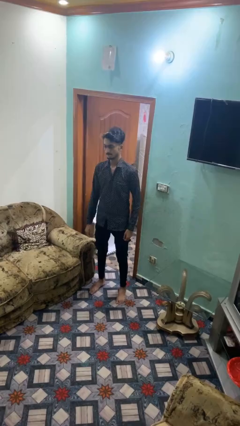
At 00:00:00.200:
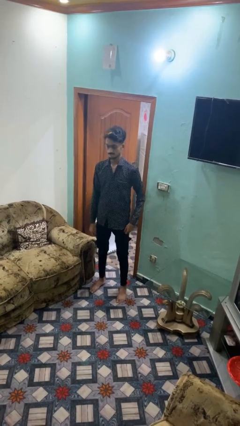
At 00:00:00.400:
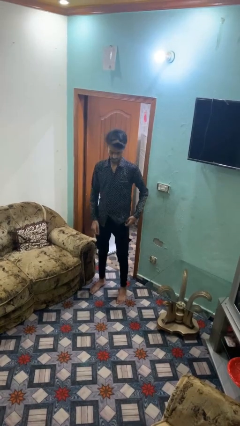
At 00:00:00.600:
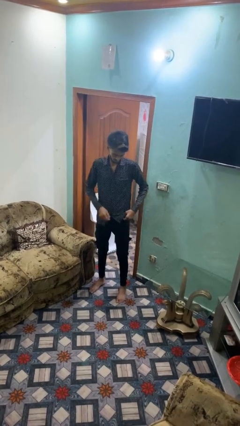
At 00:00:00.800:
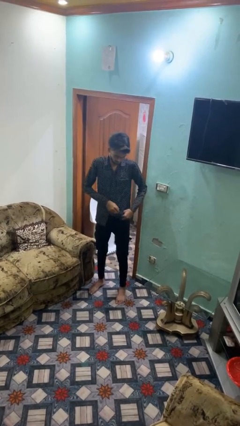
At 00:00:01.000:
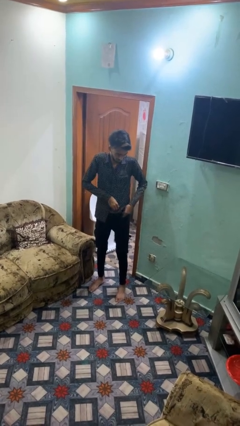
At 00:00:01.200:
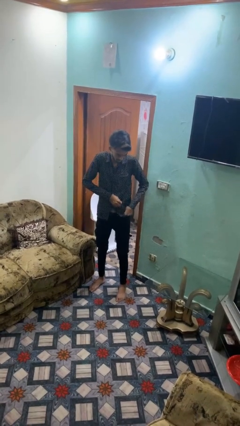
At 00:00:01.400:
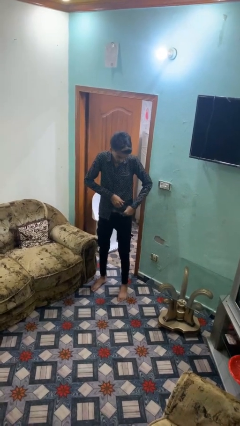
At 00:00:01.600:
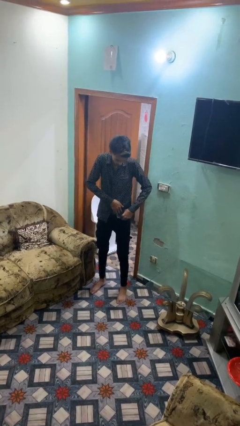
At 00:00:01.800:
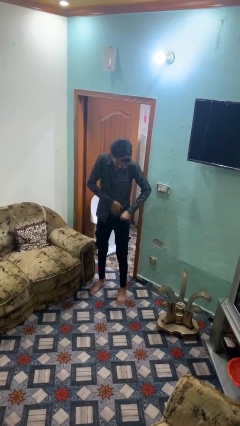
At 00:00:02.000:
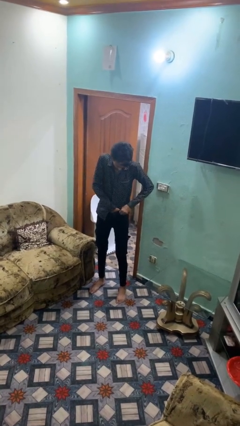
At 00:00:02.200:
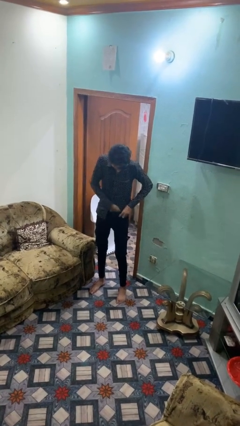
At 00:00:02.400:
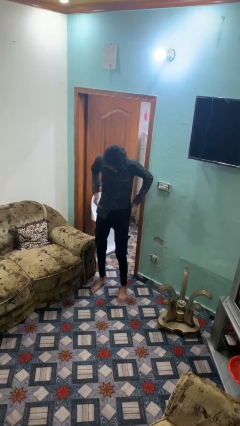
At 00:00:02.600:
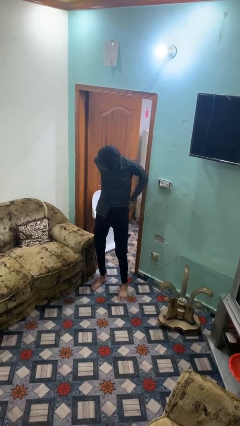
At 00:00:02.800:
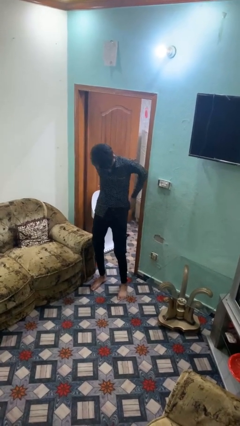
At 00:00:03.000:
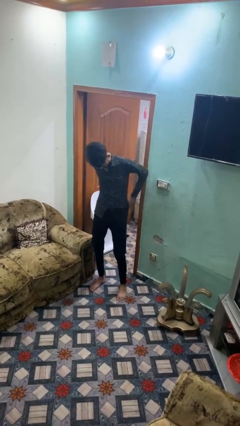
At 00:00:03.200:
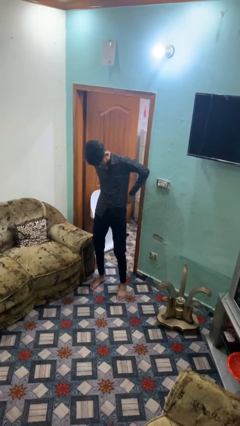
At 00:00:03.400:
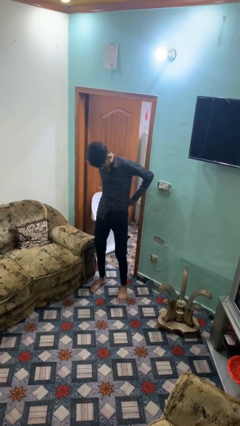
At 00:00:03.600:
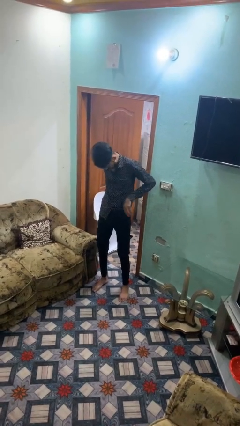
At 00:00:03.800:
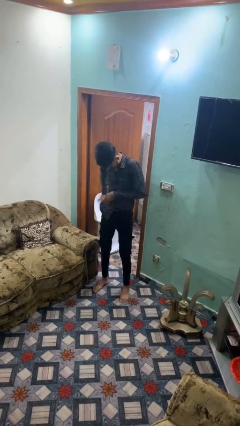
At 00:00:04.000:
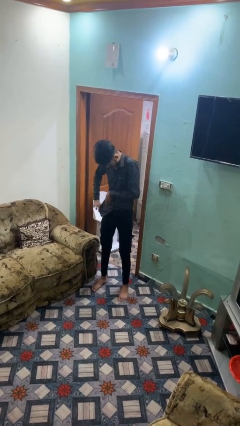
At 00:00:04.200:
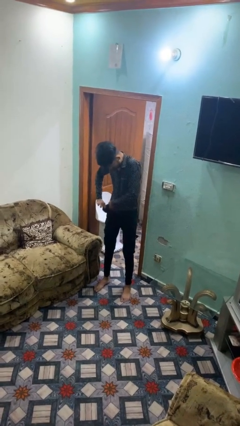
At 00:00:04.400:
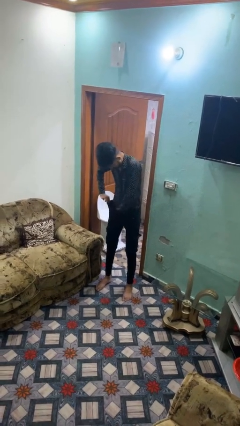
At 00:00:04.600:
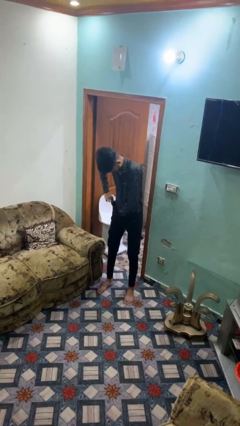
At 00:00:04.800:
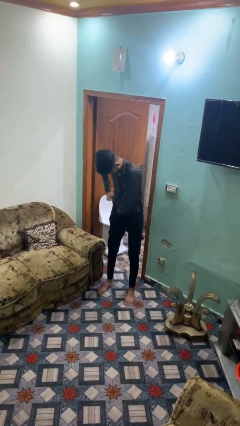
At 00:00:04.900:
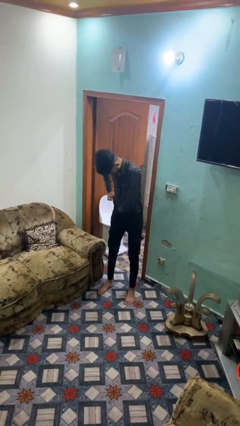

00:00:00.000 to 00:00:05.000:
person tucks in shirt

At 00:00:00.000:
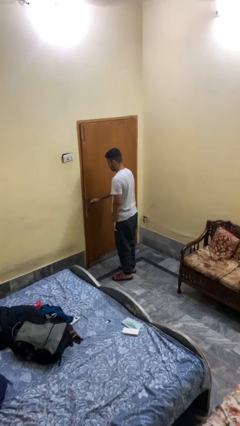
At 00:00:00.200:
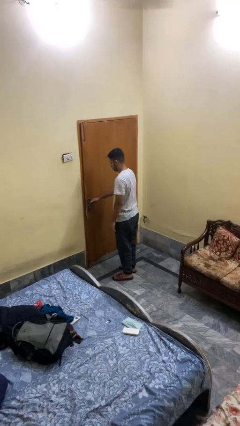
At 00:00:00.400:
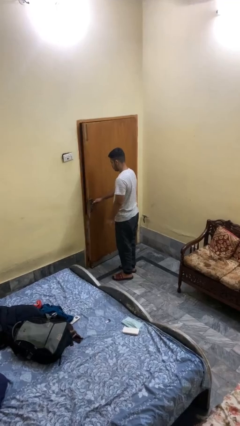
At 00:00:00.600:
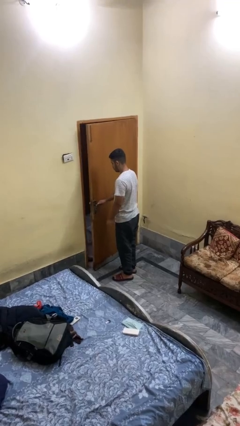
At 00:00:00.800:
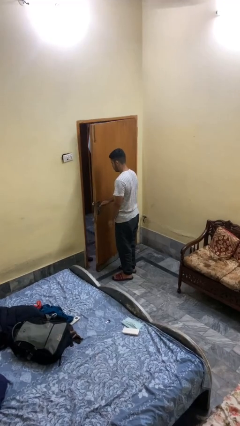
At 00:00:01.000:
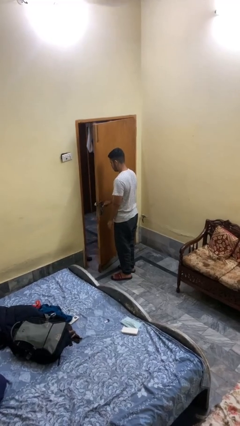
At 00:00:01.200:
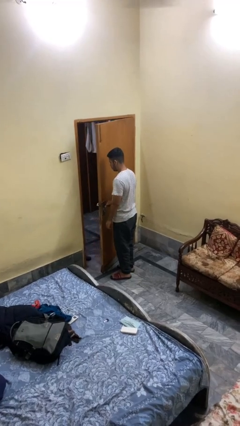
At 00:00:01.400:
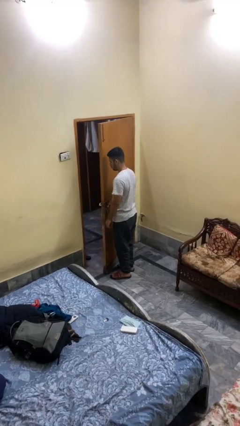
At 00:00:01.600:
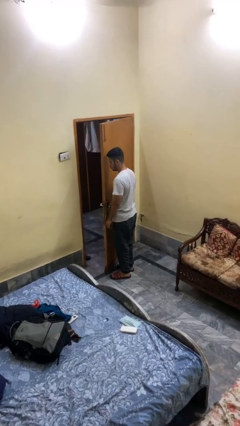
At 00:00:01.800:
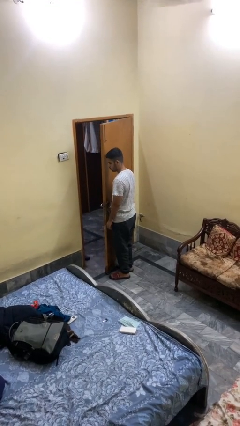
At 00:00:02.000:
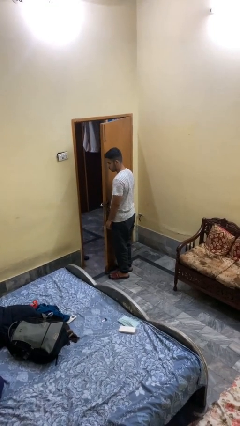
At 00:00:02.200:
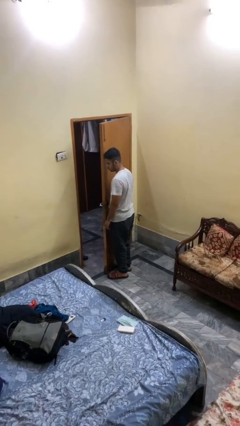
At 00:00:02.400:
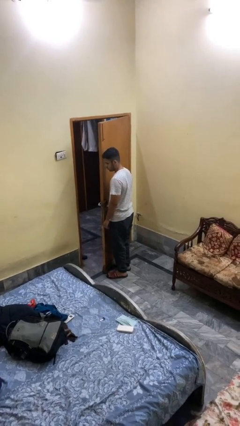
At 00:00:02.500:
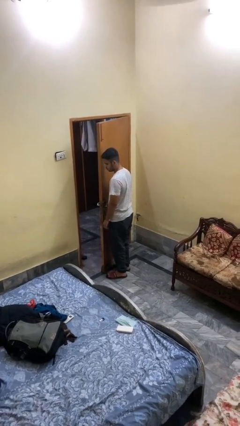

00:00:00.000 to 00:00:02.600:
person opens facility door

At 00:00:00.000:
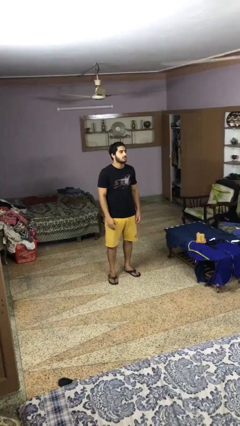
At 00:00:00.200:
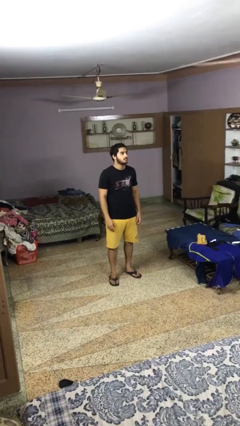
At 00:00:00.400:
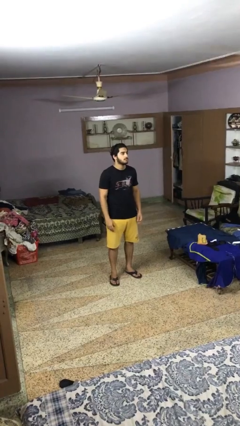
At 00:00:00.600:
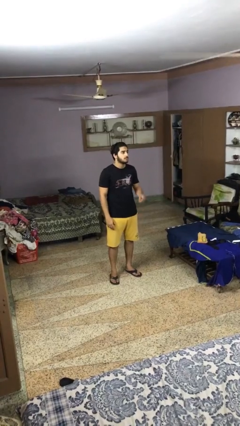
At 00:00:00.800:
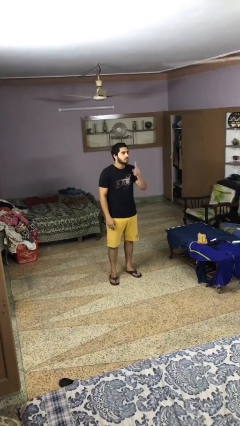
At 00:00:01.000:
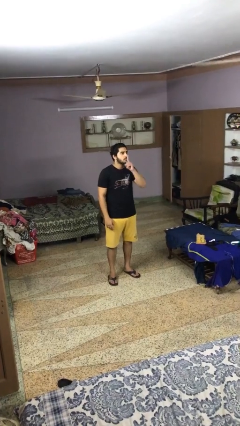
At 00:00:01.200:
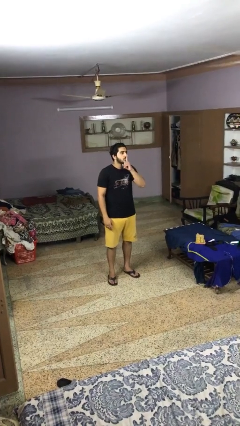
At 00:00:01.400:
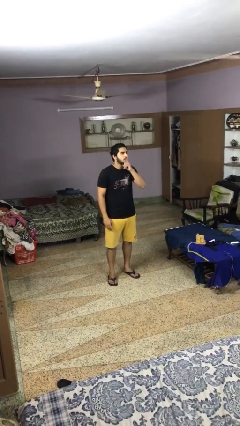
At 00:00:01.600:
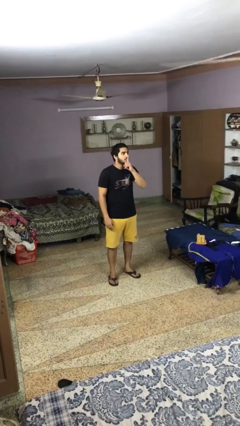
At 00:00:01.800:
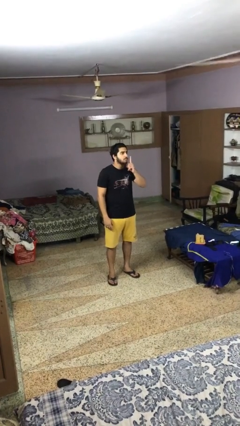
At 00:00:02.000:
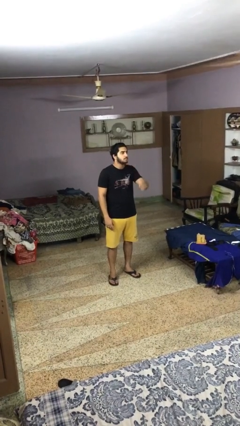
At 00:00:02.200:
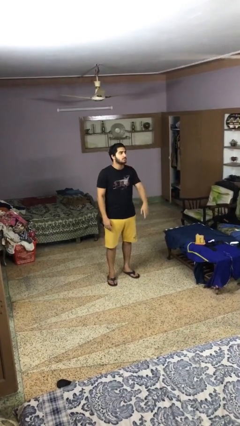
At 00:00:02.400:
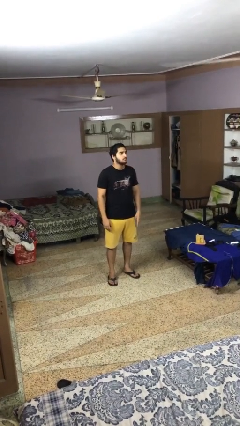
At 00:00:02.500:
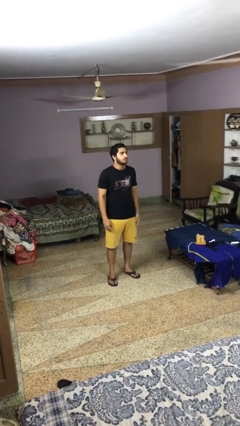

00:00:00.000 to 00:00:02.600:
person gestures be quiet

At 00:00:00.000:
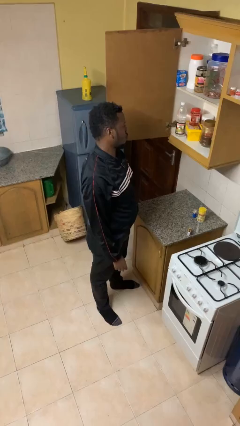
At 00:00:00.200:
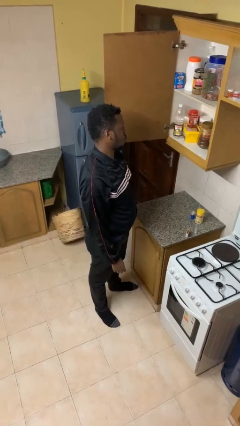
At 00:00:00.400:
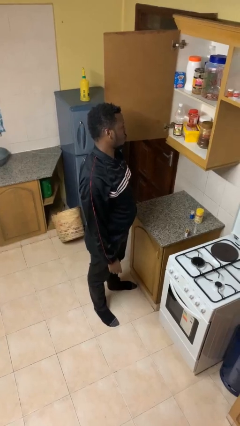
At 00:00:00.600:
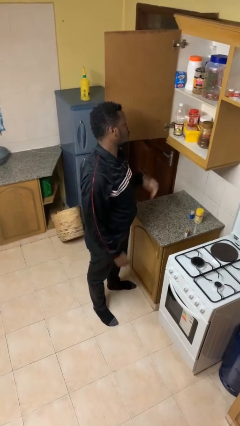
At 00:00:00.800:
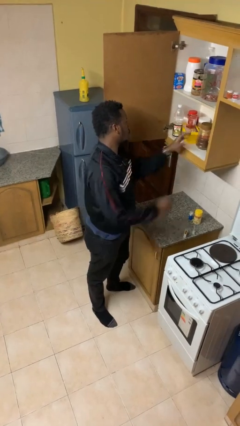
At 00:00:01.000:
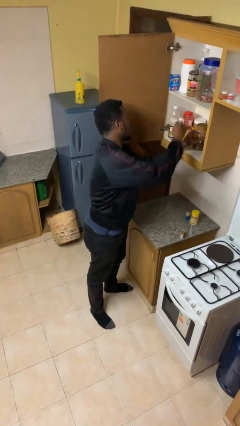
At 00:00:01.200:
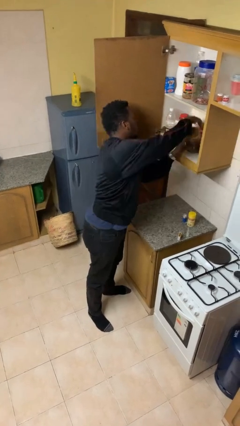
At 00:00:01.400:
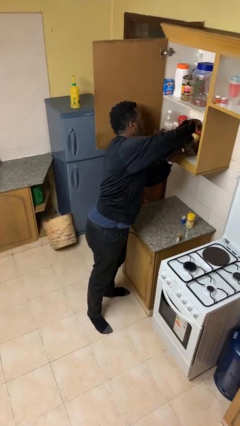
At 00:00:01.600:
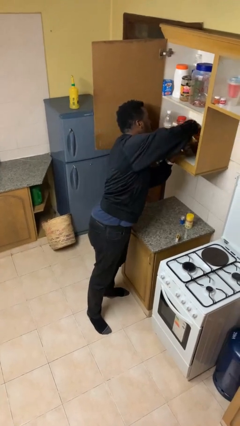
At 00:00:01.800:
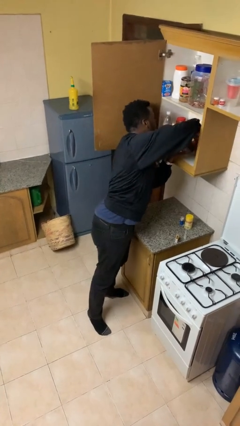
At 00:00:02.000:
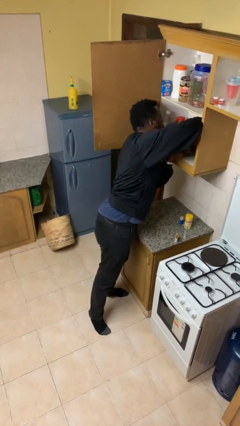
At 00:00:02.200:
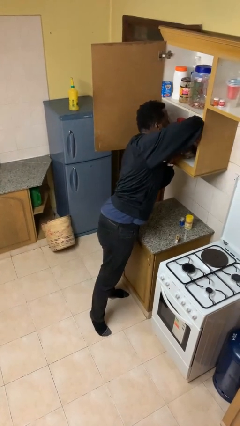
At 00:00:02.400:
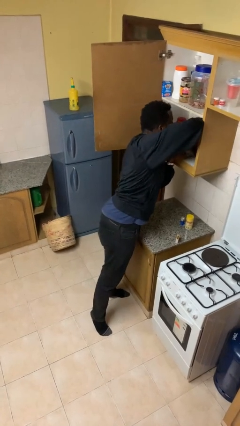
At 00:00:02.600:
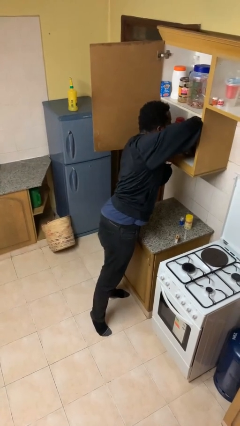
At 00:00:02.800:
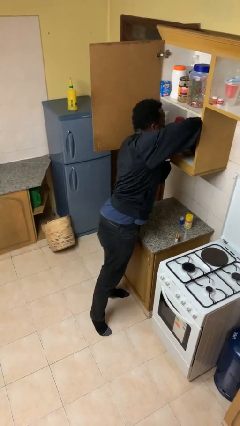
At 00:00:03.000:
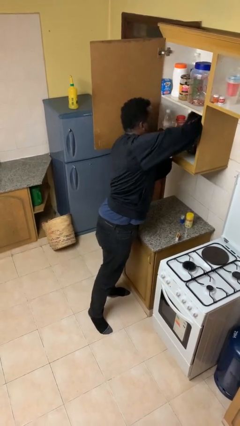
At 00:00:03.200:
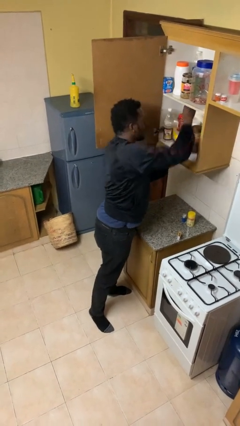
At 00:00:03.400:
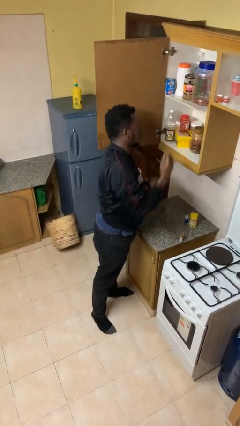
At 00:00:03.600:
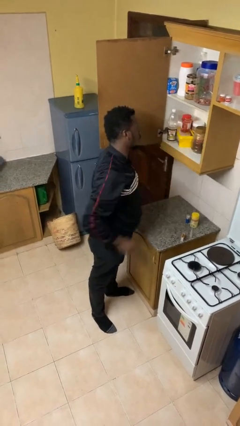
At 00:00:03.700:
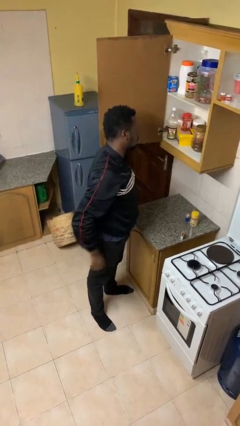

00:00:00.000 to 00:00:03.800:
person searches in cabinet

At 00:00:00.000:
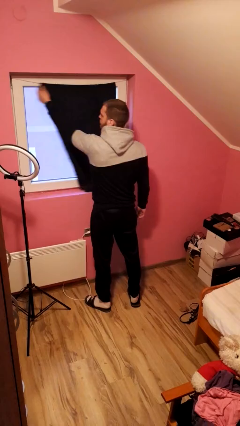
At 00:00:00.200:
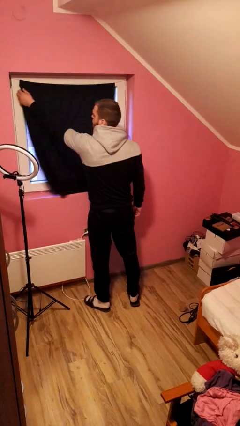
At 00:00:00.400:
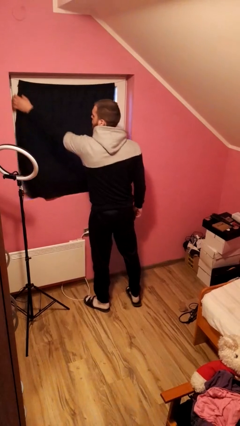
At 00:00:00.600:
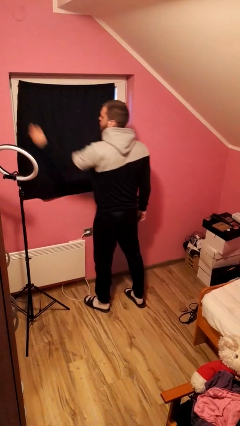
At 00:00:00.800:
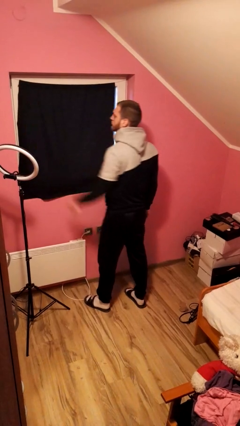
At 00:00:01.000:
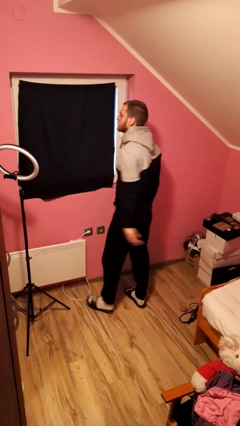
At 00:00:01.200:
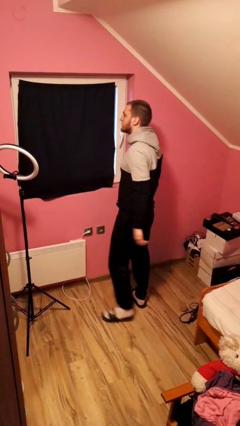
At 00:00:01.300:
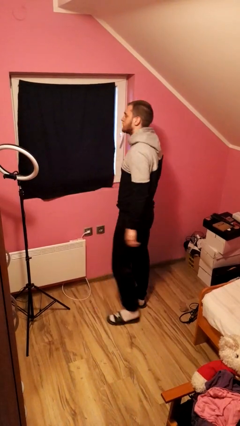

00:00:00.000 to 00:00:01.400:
person closes curtains

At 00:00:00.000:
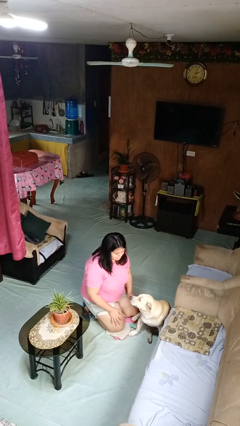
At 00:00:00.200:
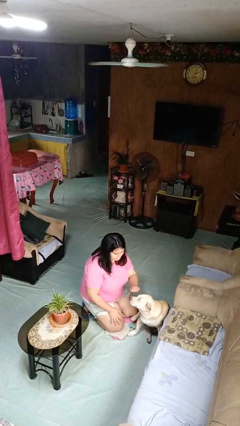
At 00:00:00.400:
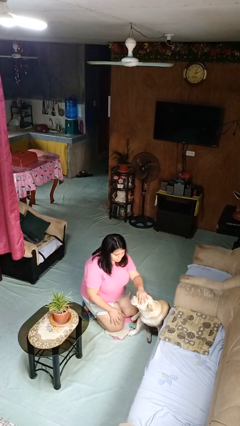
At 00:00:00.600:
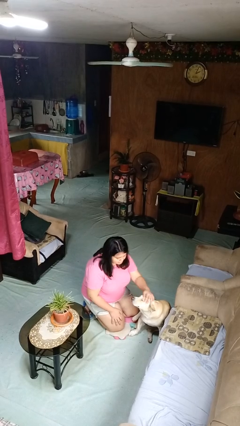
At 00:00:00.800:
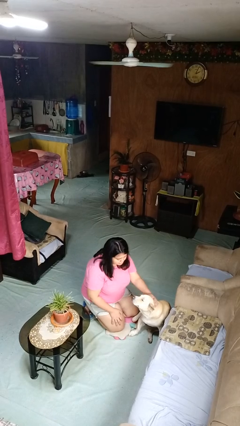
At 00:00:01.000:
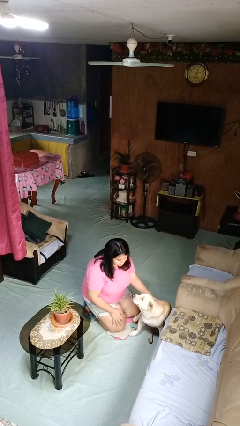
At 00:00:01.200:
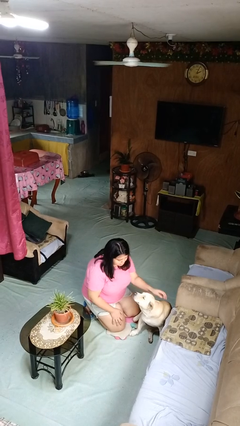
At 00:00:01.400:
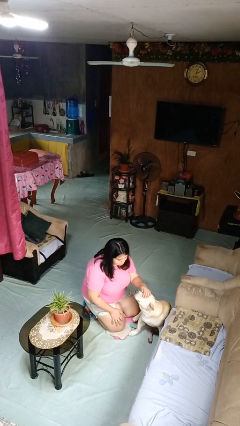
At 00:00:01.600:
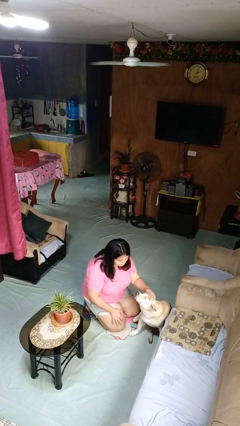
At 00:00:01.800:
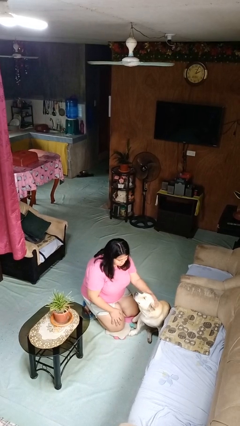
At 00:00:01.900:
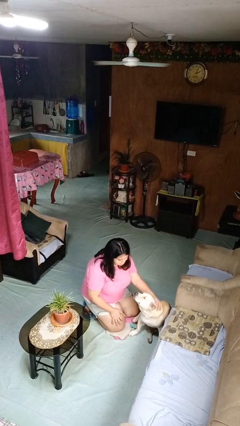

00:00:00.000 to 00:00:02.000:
person pets dog

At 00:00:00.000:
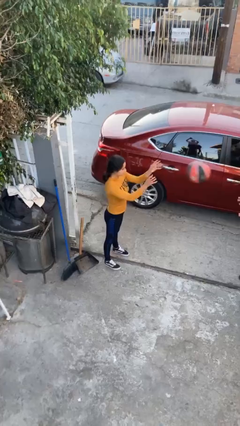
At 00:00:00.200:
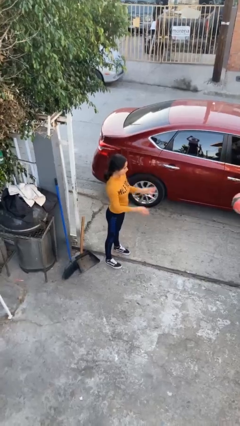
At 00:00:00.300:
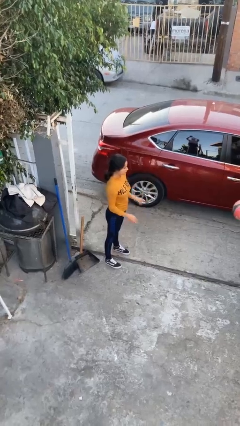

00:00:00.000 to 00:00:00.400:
person throws object to person
